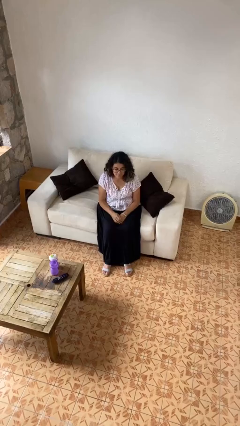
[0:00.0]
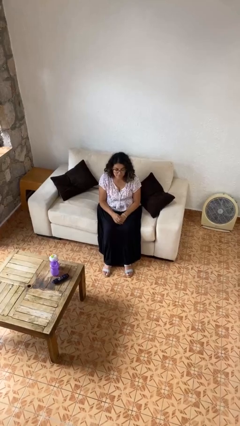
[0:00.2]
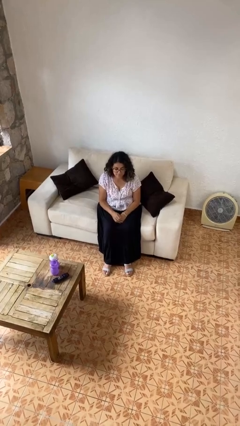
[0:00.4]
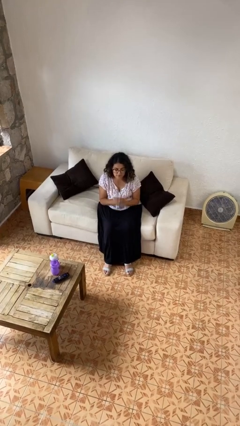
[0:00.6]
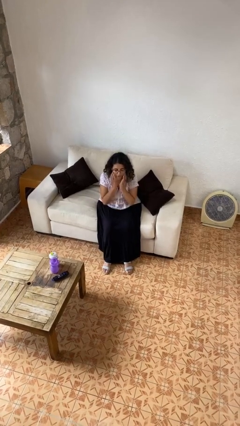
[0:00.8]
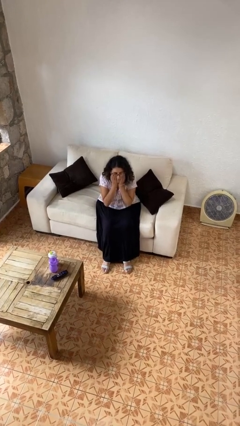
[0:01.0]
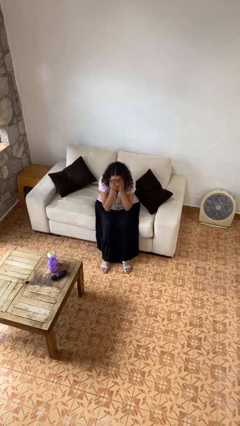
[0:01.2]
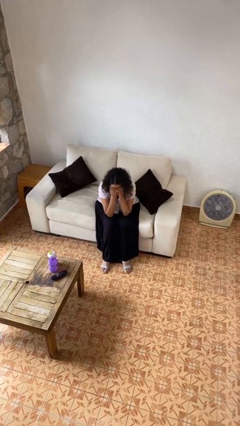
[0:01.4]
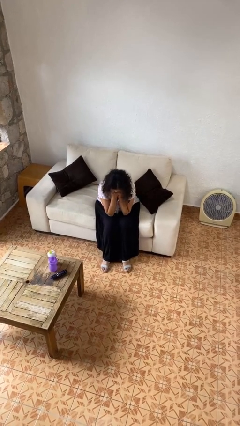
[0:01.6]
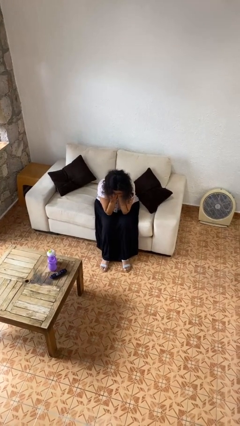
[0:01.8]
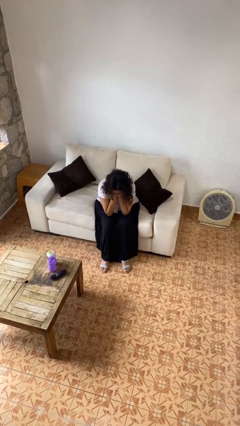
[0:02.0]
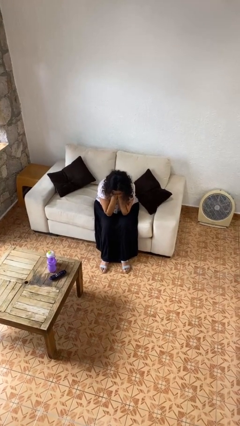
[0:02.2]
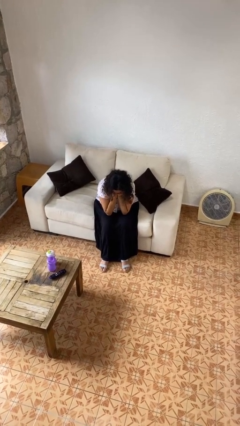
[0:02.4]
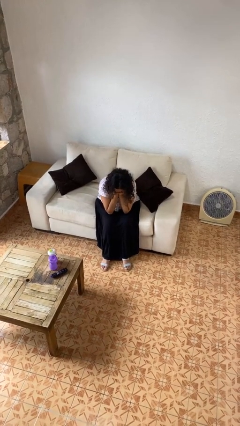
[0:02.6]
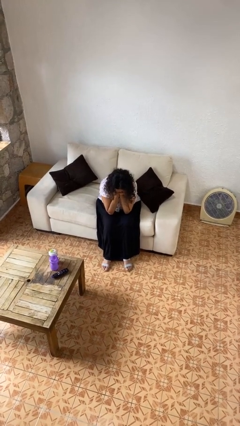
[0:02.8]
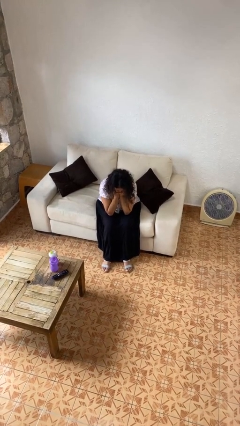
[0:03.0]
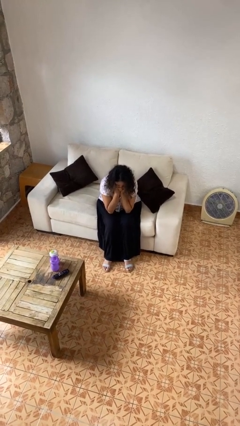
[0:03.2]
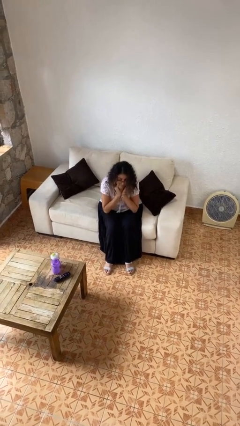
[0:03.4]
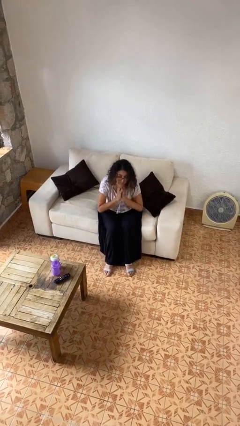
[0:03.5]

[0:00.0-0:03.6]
person covers face with hands

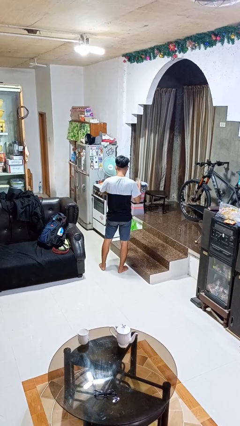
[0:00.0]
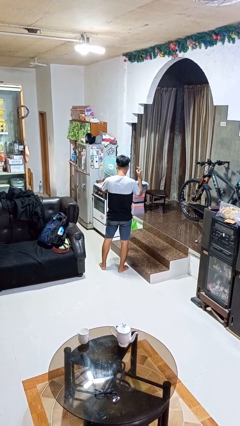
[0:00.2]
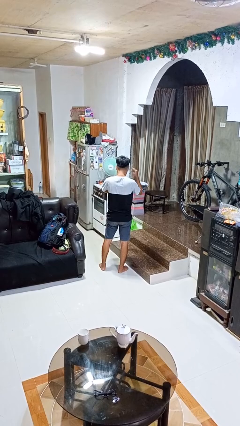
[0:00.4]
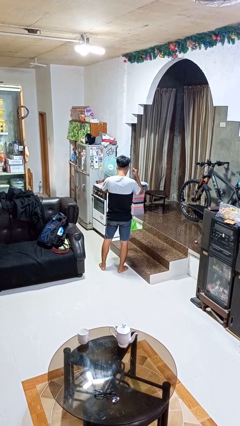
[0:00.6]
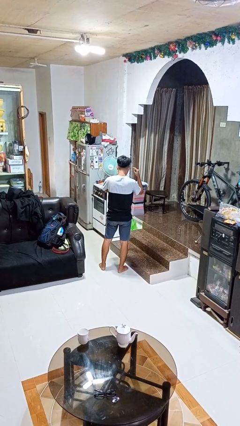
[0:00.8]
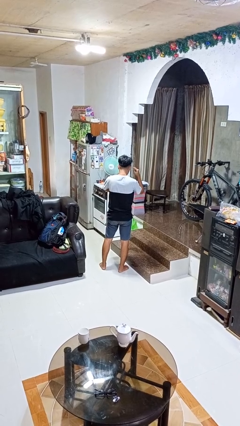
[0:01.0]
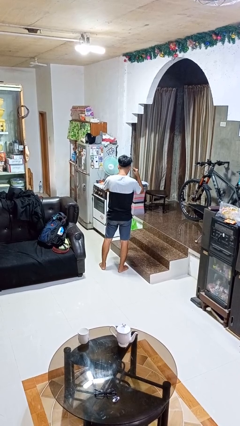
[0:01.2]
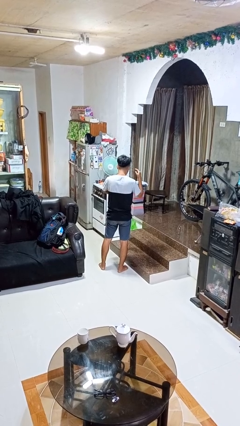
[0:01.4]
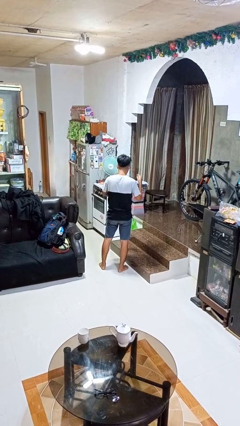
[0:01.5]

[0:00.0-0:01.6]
person gestures listen closely

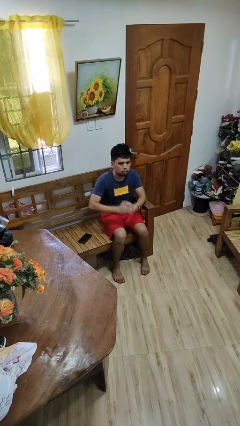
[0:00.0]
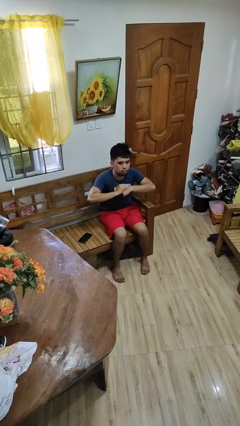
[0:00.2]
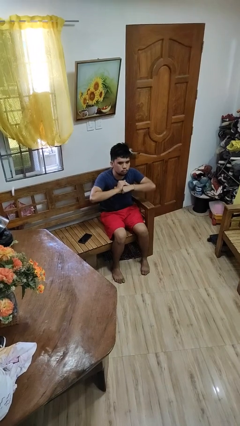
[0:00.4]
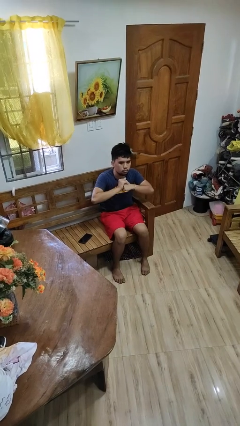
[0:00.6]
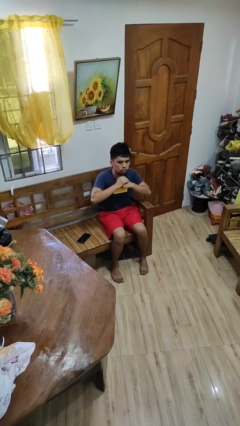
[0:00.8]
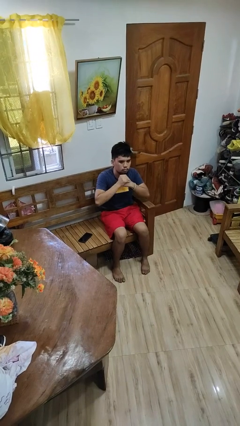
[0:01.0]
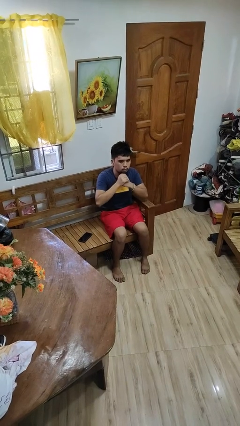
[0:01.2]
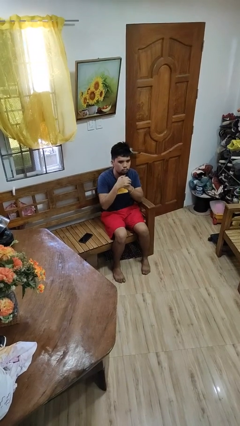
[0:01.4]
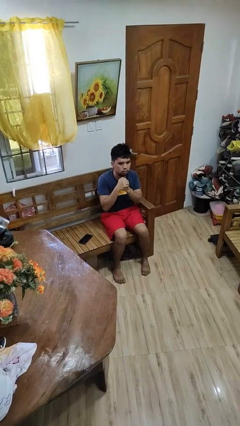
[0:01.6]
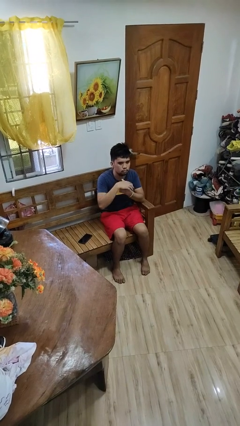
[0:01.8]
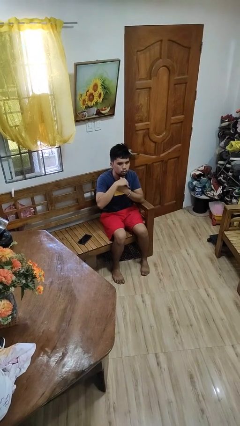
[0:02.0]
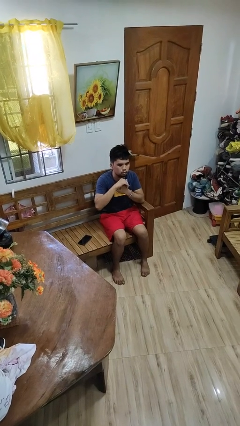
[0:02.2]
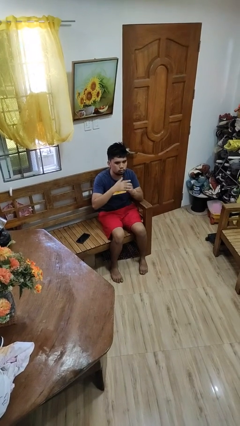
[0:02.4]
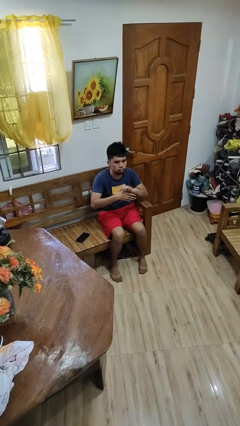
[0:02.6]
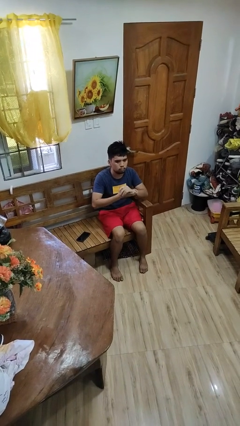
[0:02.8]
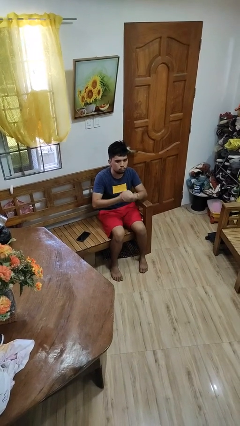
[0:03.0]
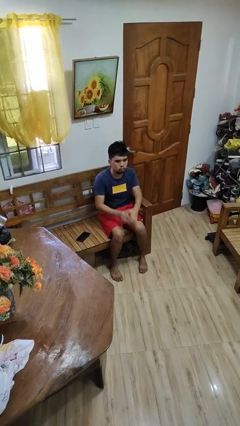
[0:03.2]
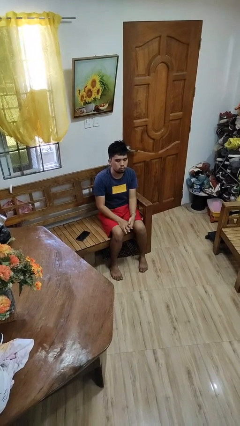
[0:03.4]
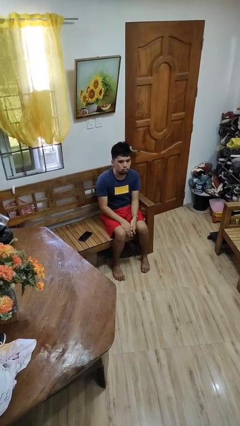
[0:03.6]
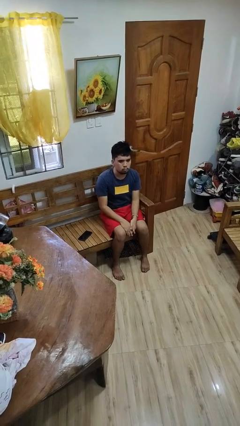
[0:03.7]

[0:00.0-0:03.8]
person cracks knuckles

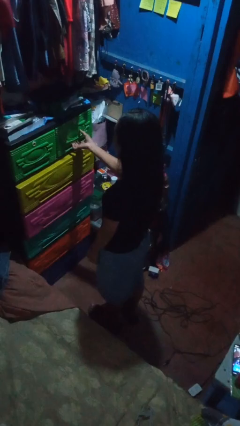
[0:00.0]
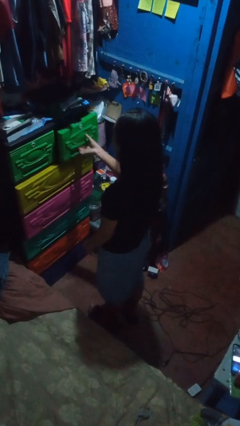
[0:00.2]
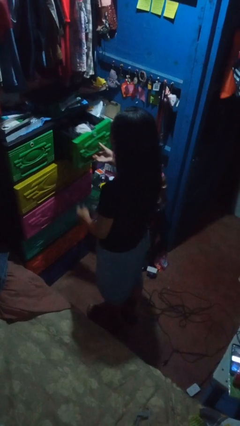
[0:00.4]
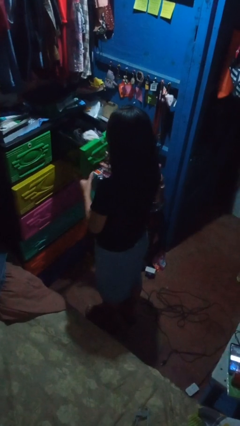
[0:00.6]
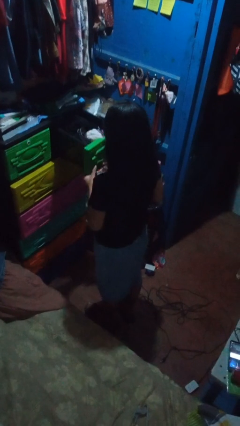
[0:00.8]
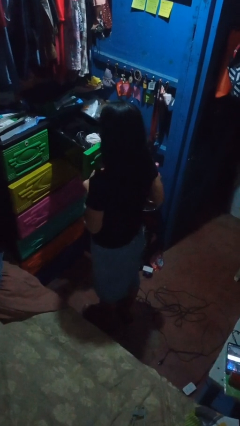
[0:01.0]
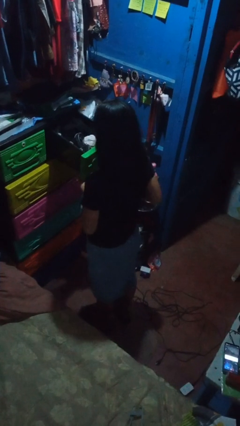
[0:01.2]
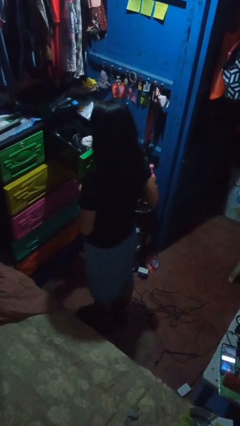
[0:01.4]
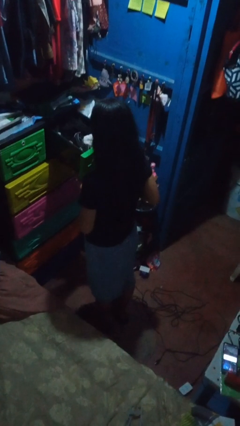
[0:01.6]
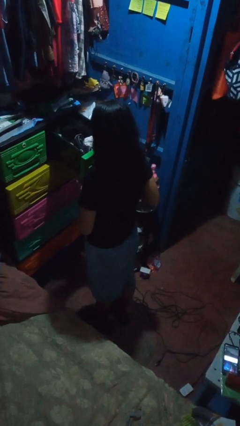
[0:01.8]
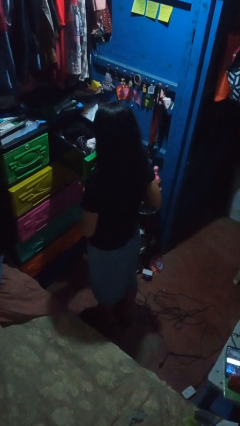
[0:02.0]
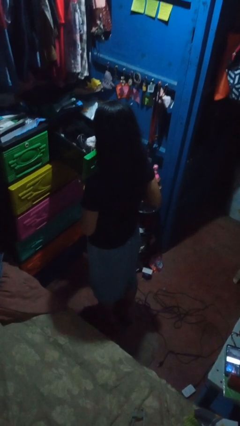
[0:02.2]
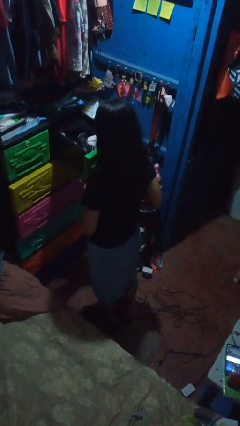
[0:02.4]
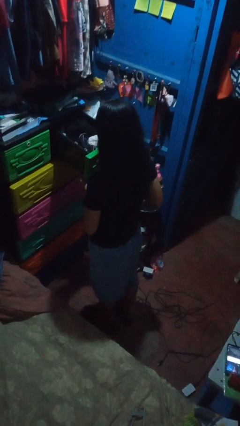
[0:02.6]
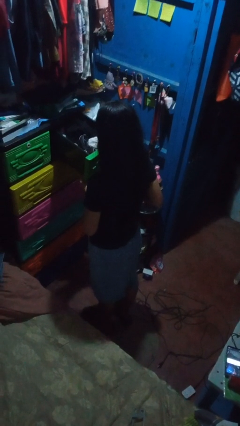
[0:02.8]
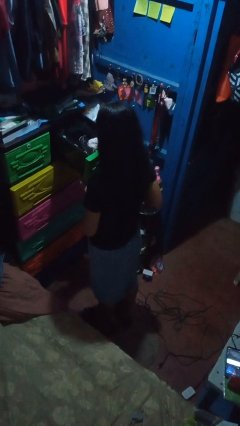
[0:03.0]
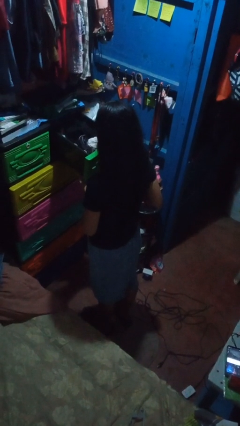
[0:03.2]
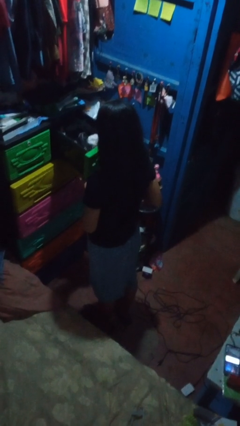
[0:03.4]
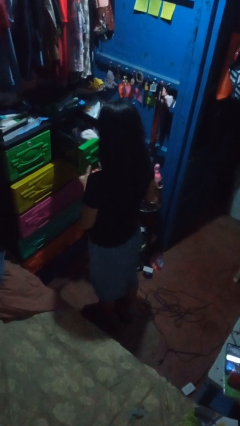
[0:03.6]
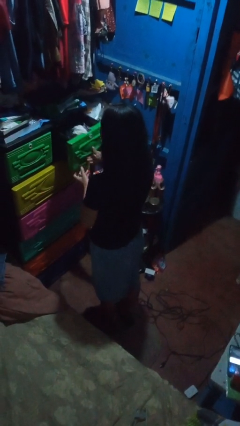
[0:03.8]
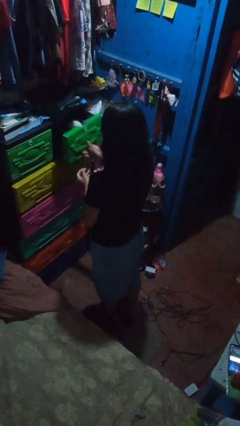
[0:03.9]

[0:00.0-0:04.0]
person opens dresser drawer

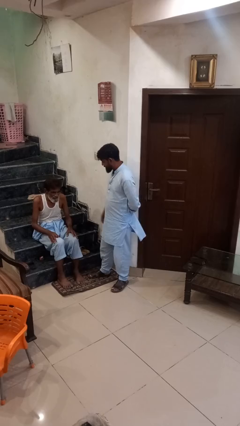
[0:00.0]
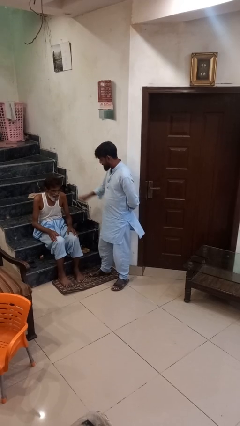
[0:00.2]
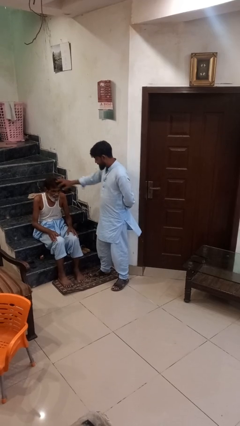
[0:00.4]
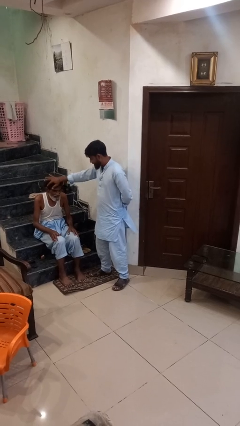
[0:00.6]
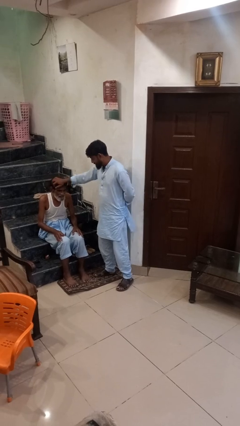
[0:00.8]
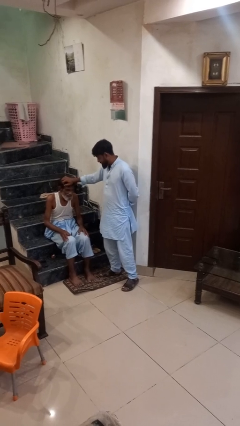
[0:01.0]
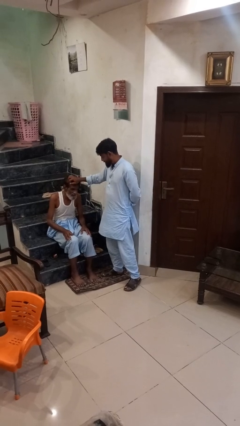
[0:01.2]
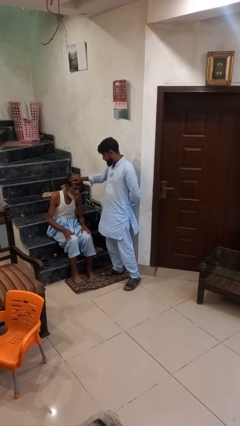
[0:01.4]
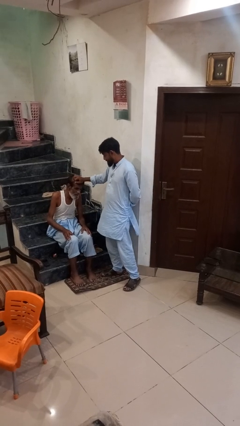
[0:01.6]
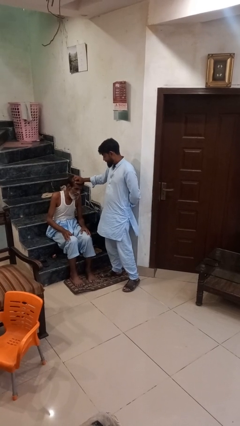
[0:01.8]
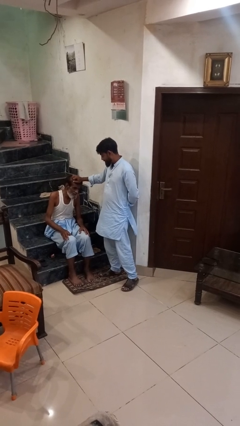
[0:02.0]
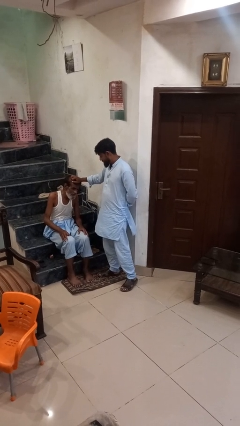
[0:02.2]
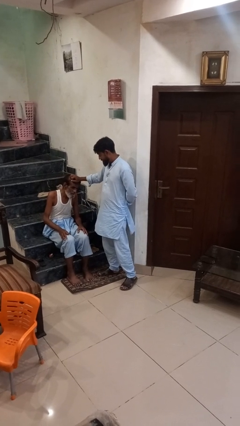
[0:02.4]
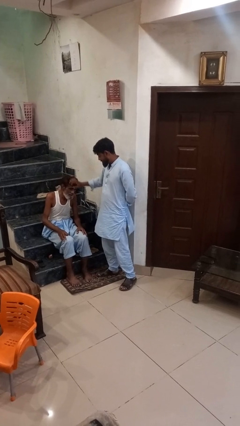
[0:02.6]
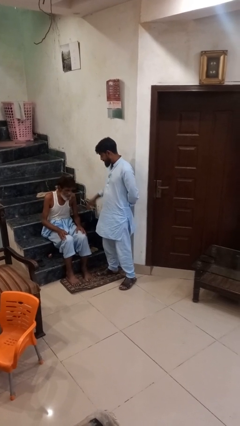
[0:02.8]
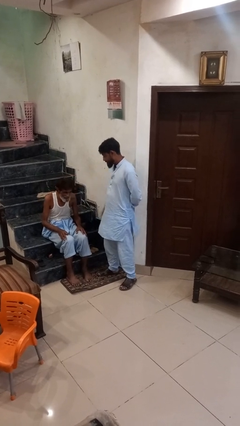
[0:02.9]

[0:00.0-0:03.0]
person grabs person by hair

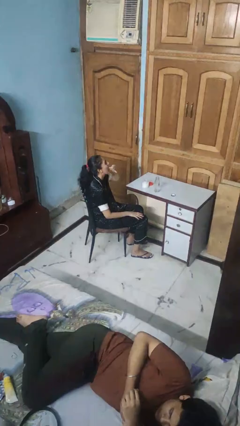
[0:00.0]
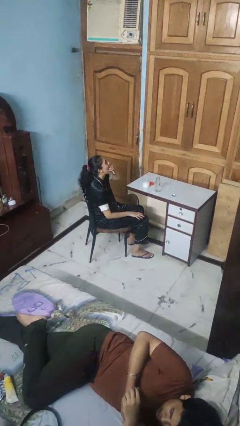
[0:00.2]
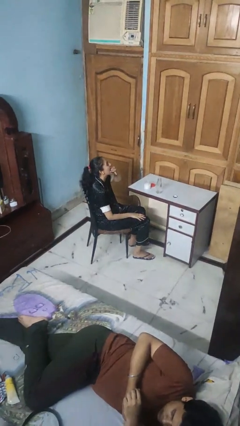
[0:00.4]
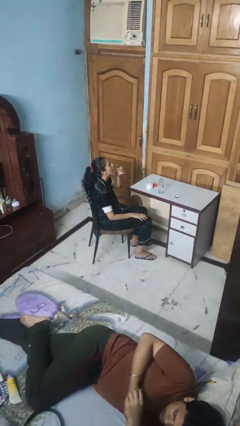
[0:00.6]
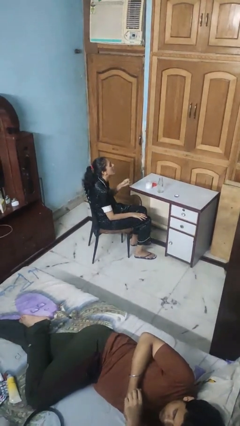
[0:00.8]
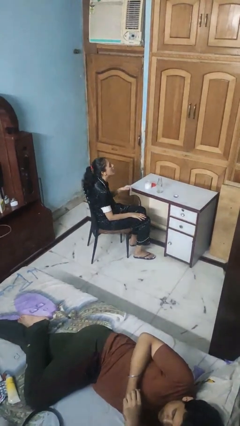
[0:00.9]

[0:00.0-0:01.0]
person takes medicine pills
